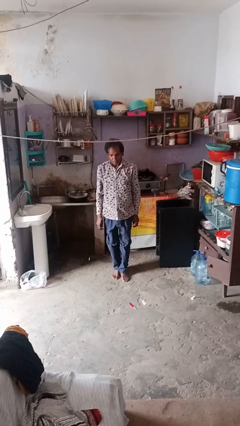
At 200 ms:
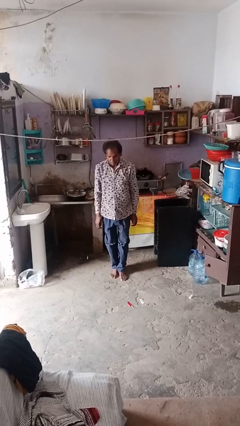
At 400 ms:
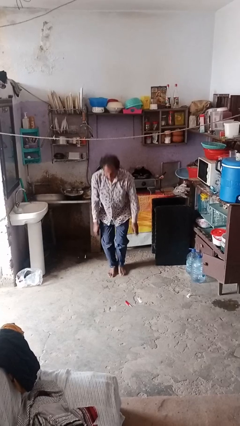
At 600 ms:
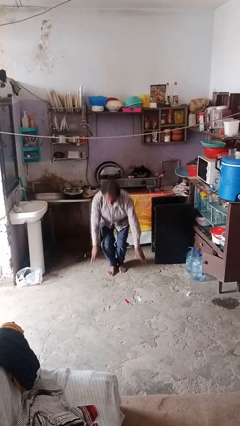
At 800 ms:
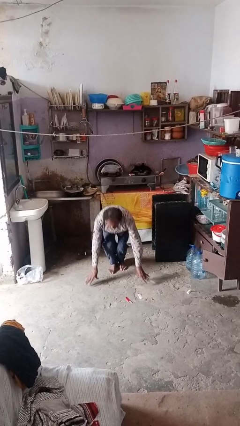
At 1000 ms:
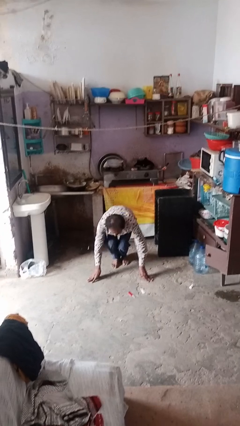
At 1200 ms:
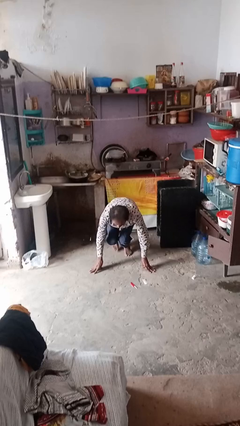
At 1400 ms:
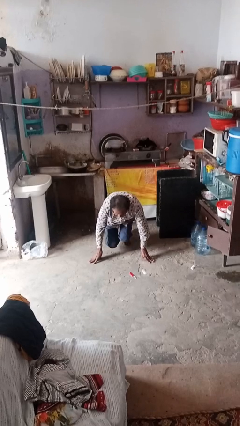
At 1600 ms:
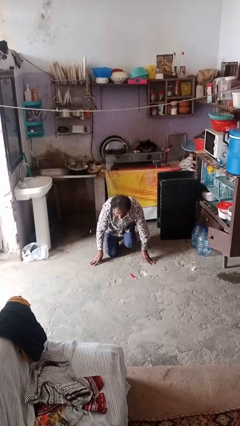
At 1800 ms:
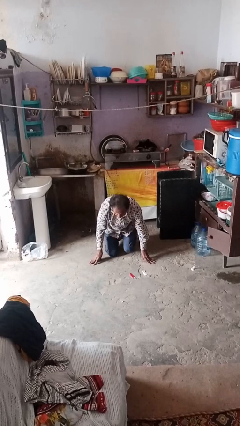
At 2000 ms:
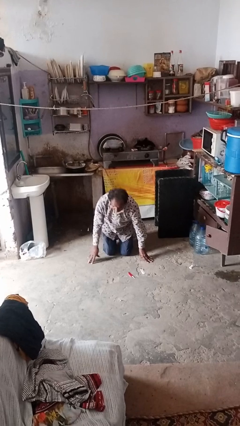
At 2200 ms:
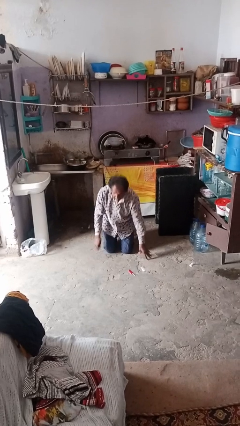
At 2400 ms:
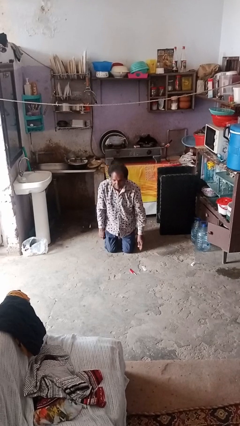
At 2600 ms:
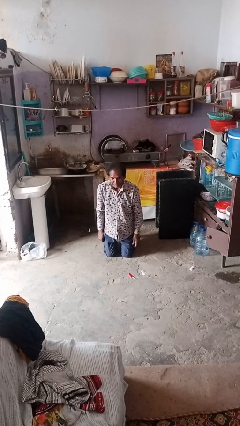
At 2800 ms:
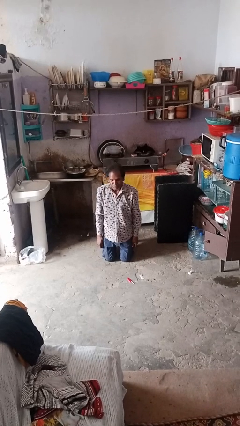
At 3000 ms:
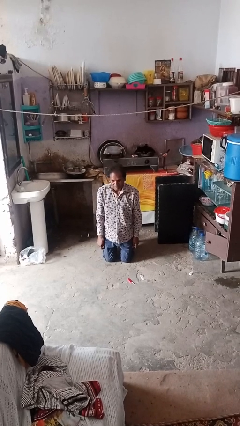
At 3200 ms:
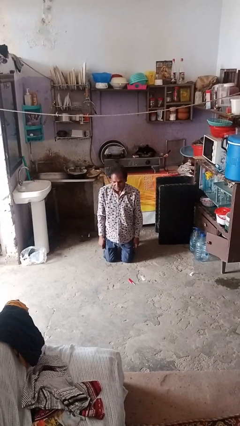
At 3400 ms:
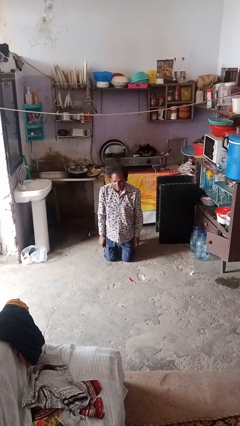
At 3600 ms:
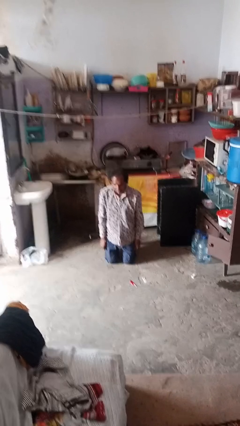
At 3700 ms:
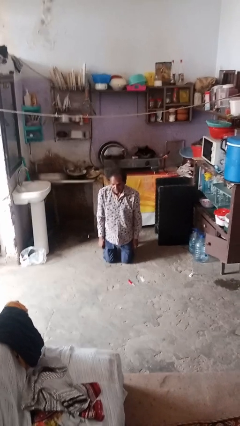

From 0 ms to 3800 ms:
person kneels

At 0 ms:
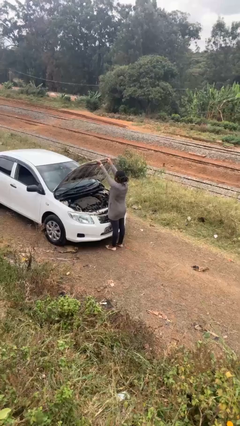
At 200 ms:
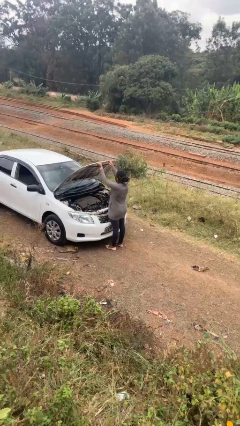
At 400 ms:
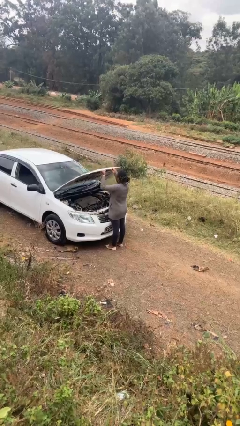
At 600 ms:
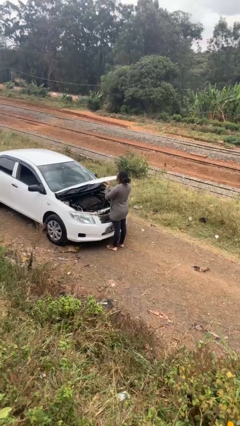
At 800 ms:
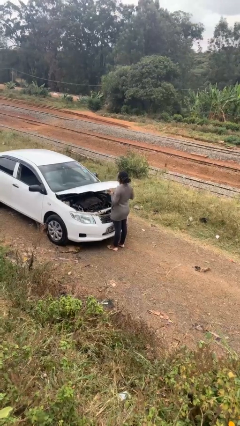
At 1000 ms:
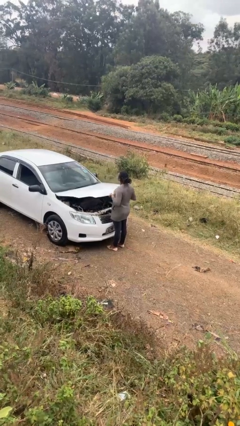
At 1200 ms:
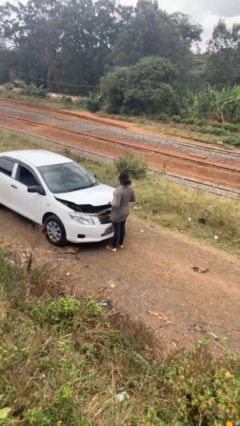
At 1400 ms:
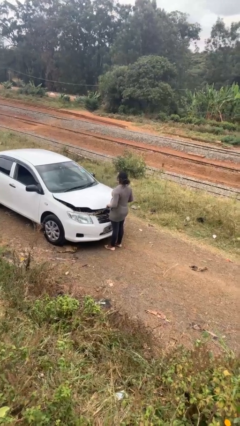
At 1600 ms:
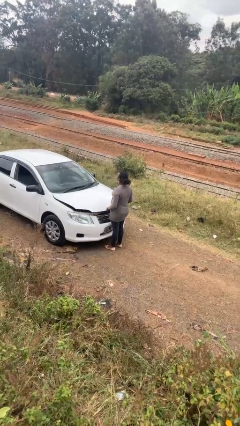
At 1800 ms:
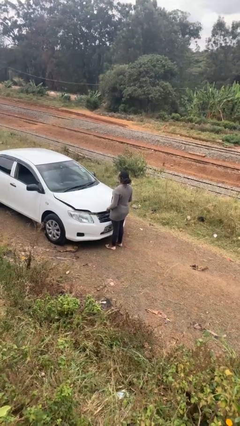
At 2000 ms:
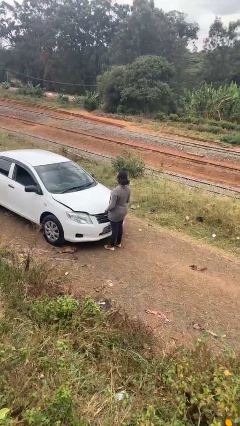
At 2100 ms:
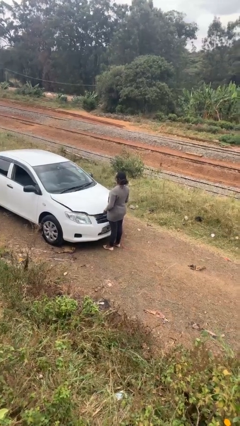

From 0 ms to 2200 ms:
person closes car hood

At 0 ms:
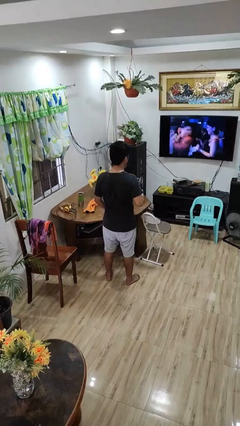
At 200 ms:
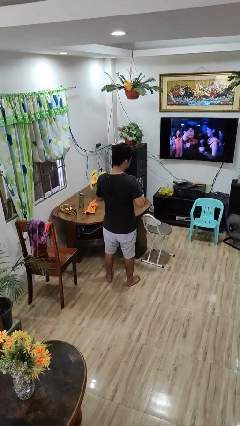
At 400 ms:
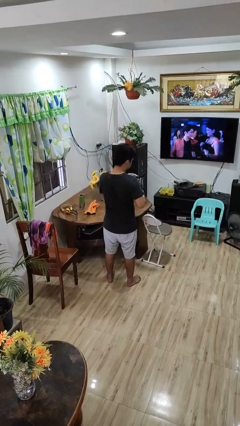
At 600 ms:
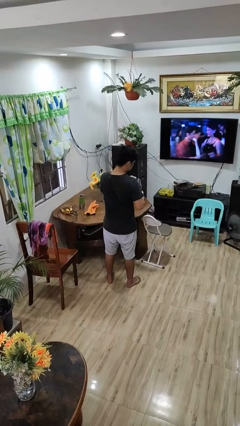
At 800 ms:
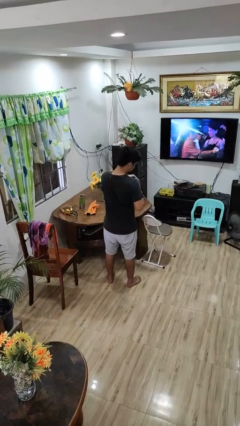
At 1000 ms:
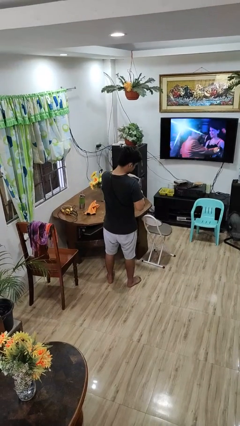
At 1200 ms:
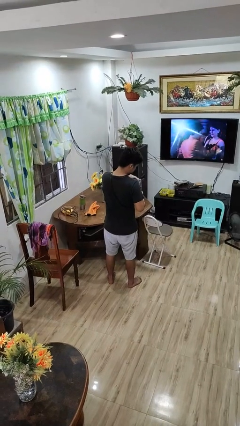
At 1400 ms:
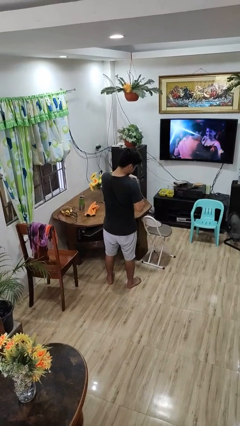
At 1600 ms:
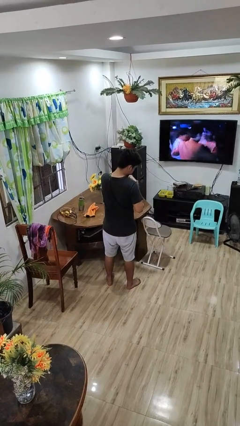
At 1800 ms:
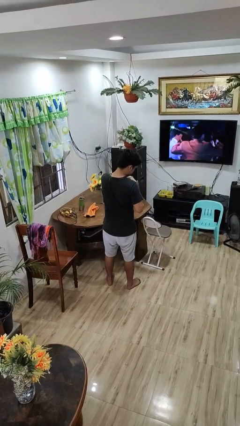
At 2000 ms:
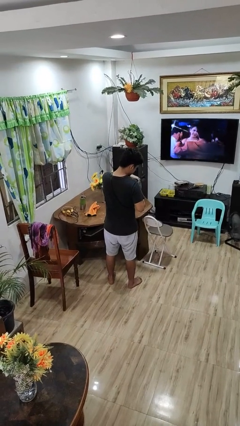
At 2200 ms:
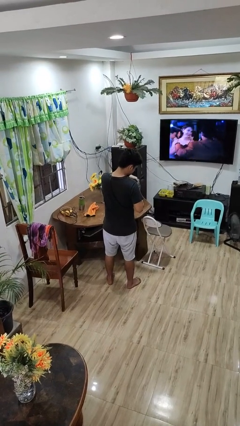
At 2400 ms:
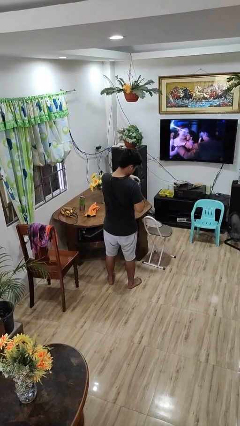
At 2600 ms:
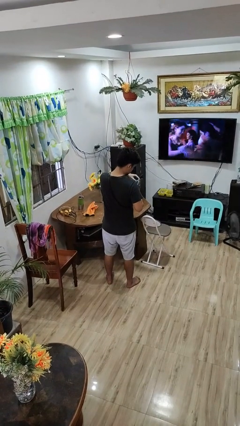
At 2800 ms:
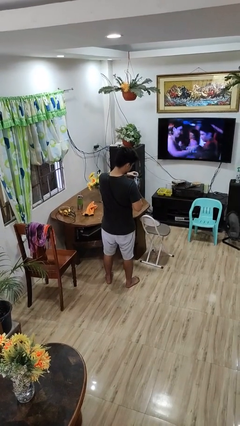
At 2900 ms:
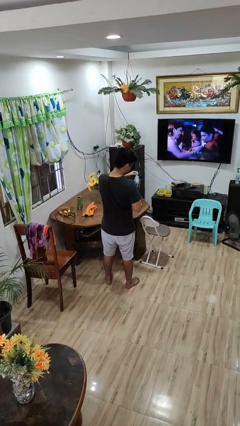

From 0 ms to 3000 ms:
person searches in purse

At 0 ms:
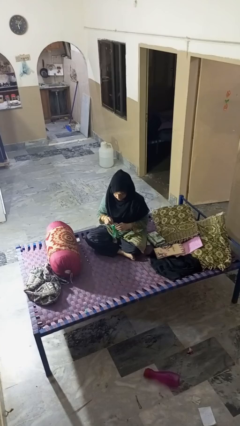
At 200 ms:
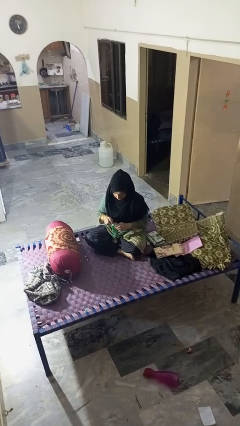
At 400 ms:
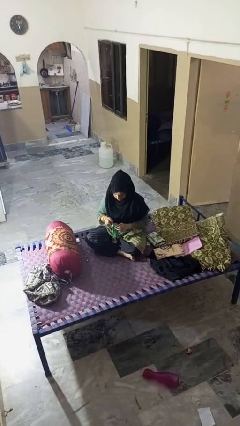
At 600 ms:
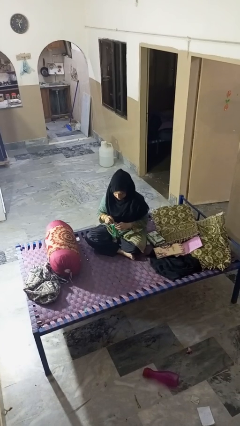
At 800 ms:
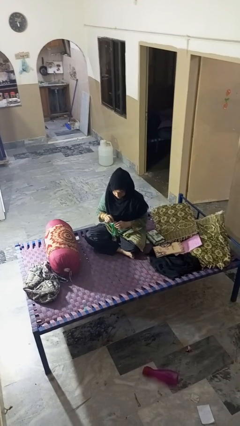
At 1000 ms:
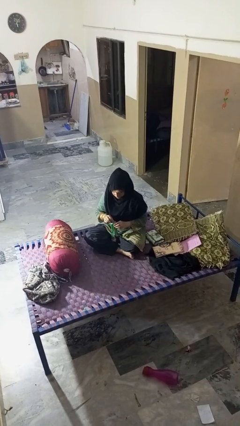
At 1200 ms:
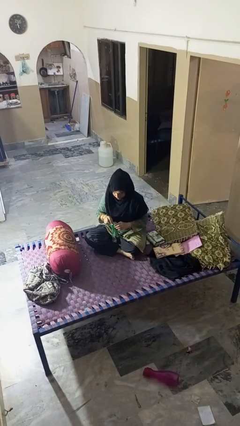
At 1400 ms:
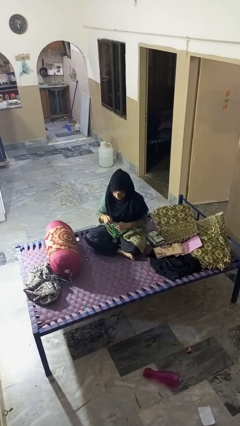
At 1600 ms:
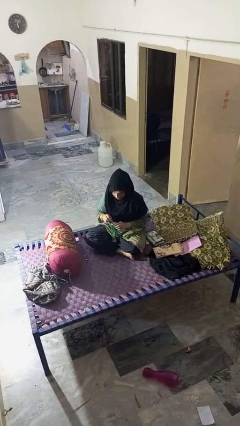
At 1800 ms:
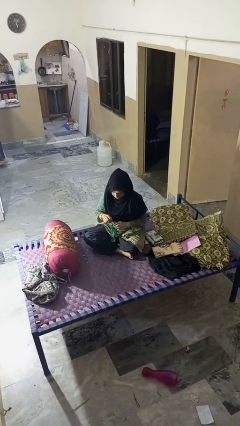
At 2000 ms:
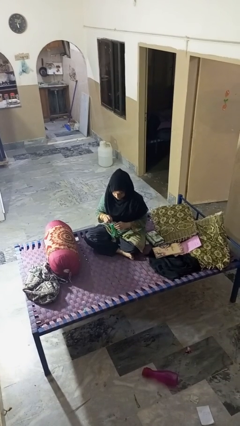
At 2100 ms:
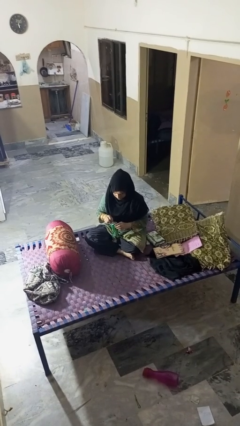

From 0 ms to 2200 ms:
person opens can with can opener

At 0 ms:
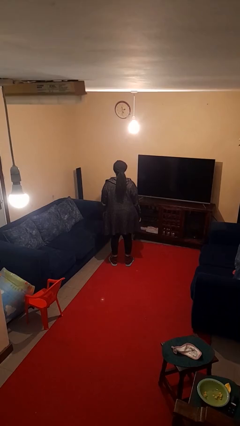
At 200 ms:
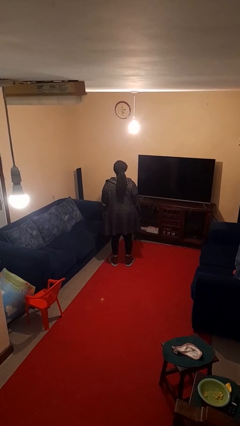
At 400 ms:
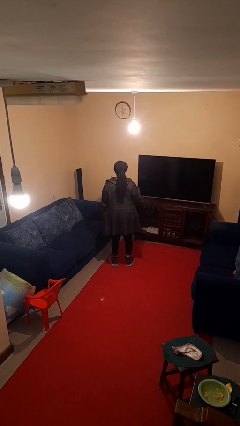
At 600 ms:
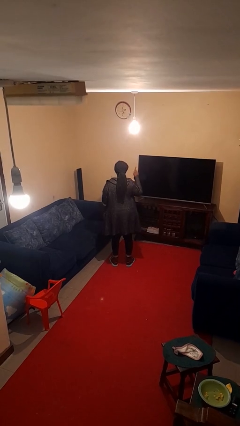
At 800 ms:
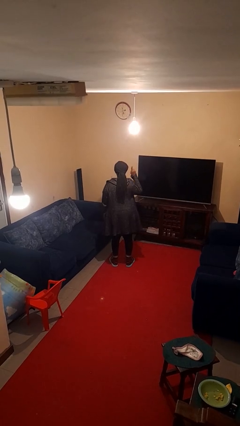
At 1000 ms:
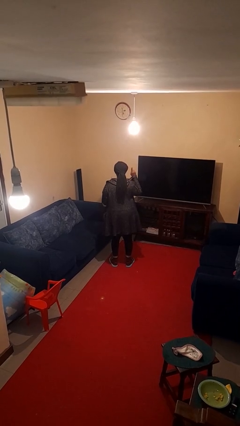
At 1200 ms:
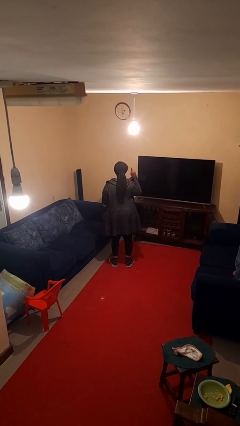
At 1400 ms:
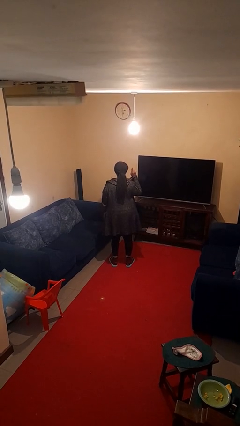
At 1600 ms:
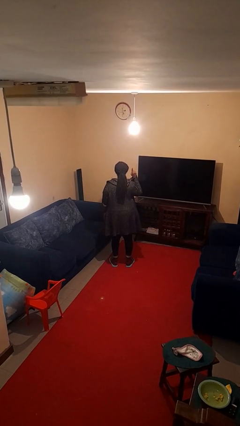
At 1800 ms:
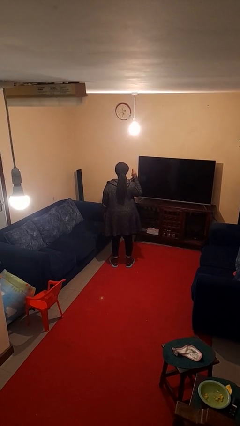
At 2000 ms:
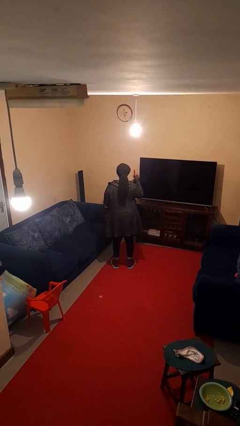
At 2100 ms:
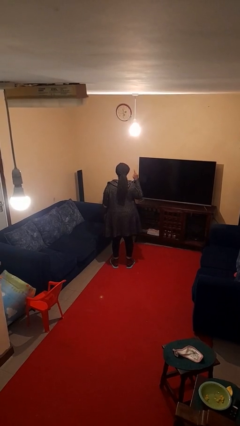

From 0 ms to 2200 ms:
person gestures number one

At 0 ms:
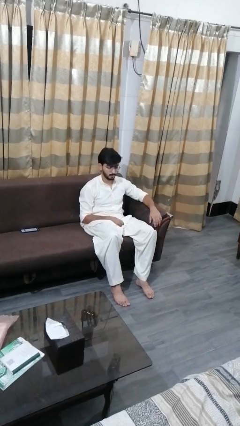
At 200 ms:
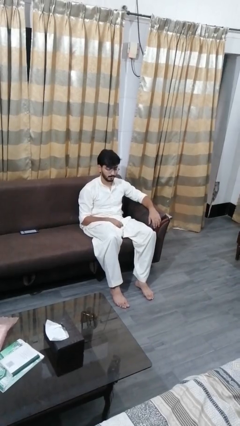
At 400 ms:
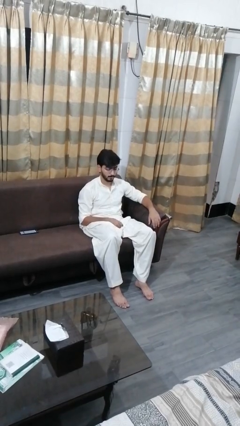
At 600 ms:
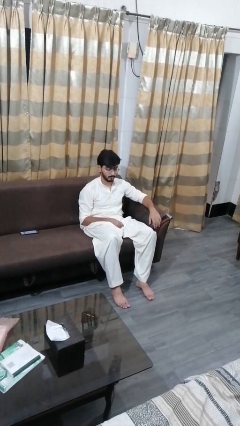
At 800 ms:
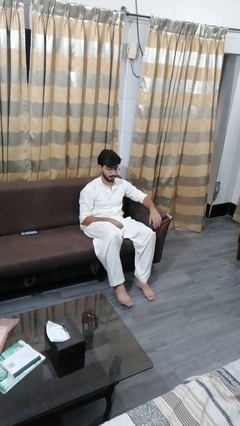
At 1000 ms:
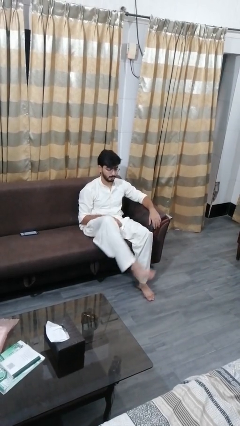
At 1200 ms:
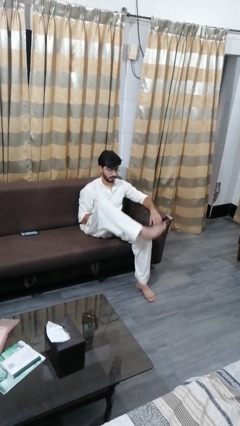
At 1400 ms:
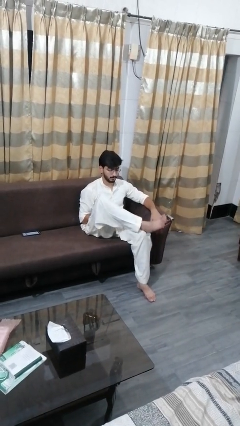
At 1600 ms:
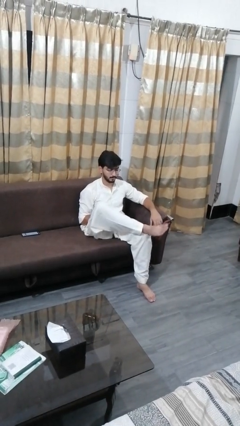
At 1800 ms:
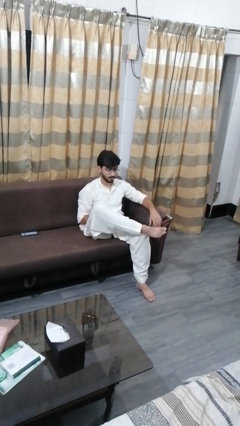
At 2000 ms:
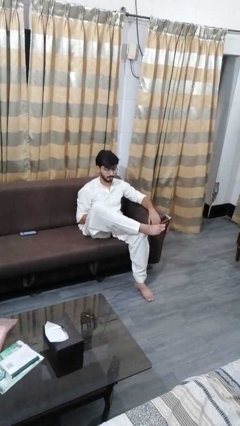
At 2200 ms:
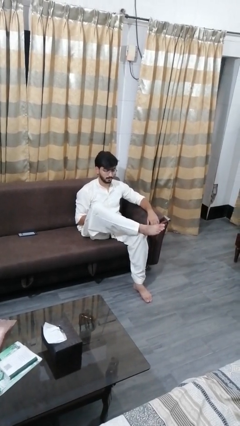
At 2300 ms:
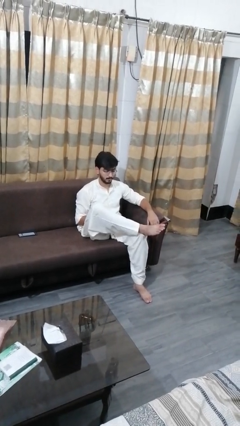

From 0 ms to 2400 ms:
person crosses legs

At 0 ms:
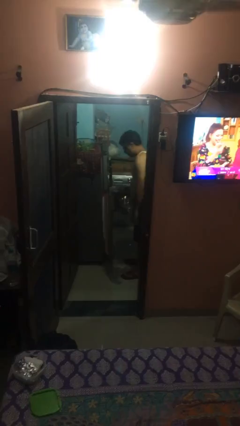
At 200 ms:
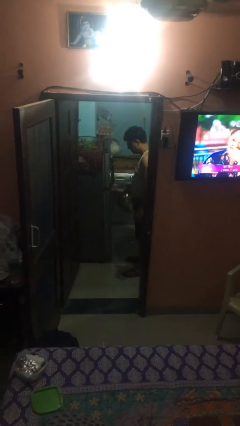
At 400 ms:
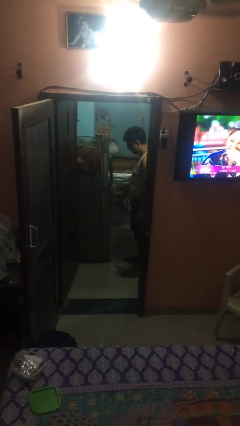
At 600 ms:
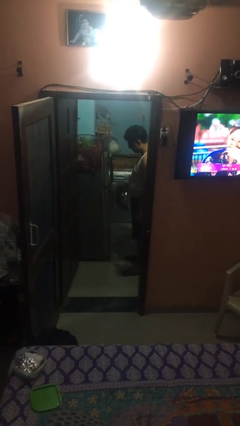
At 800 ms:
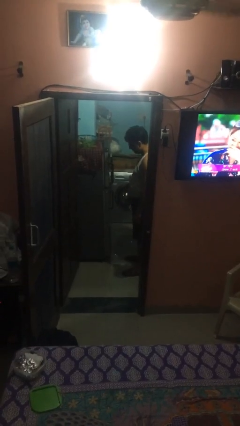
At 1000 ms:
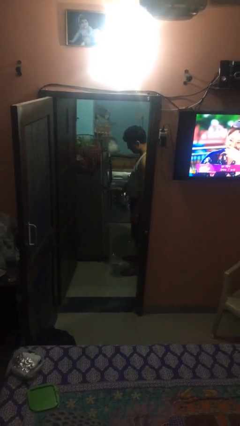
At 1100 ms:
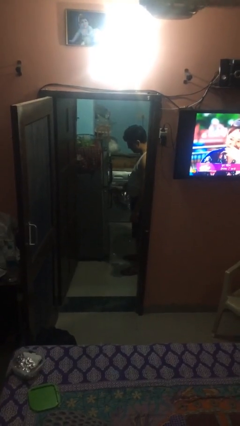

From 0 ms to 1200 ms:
person closes refrigerator
